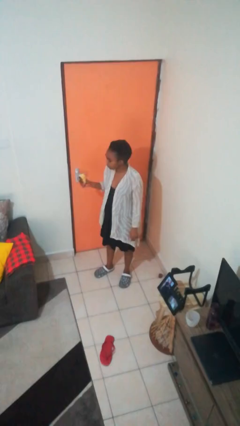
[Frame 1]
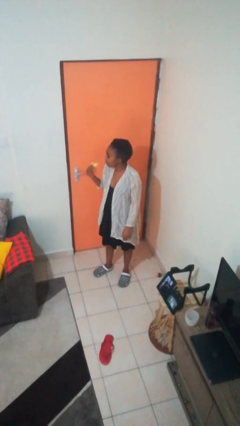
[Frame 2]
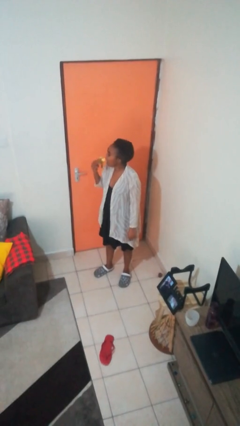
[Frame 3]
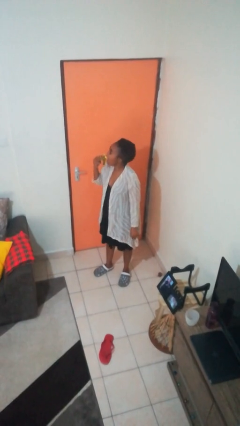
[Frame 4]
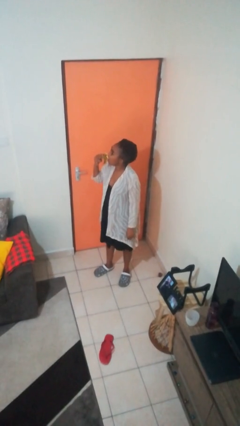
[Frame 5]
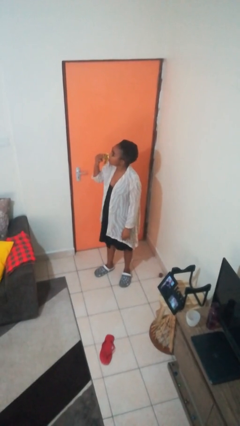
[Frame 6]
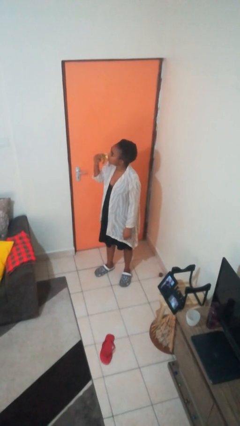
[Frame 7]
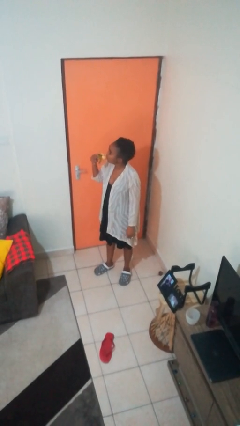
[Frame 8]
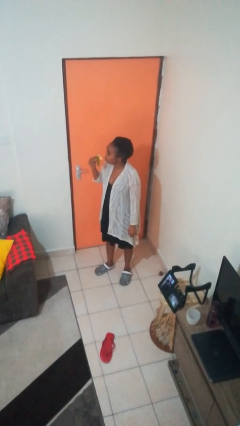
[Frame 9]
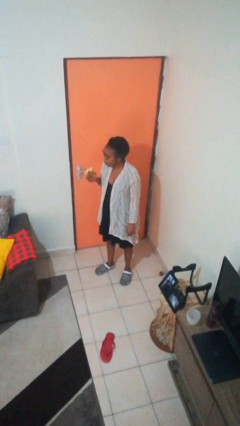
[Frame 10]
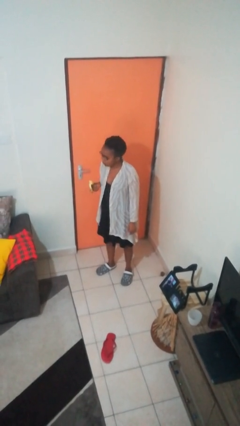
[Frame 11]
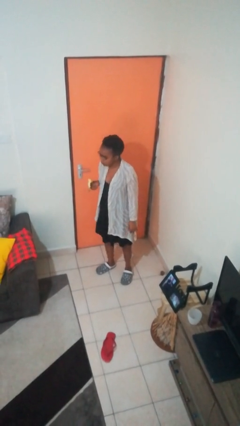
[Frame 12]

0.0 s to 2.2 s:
person eats banana

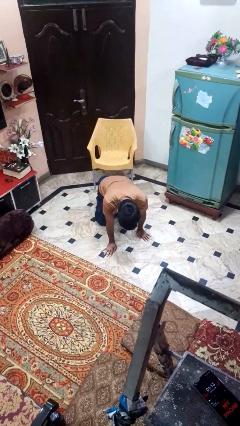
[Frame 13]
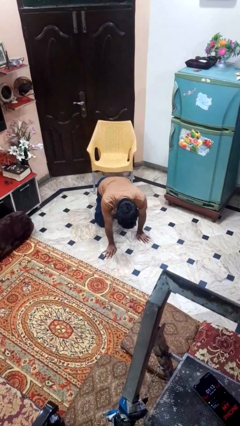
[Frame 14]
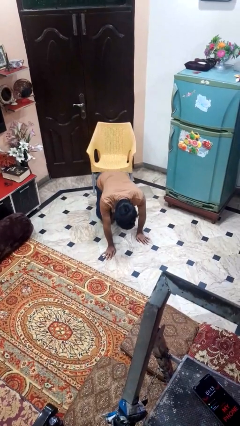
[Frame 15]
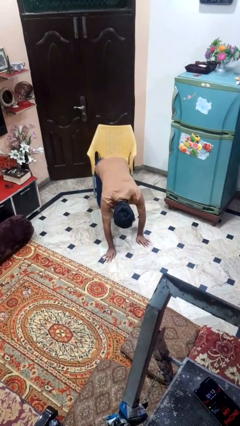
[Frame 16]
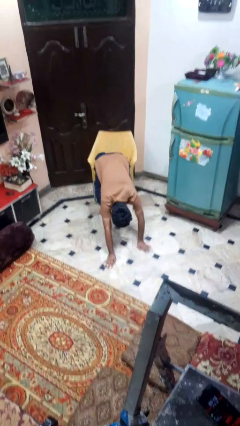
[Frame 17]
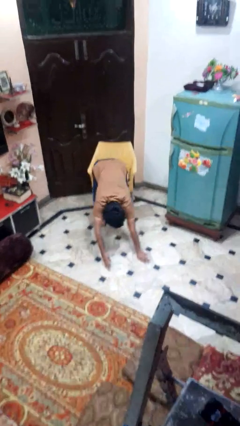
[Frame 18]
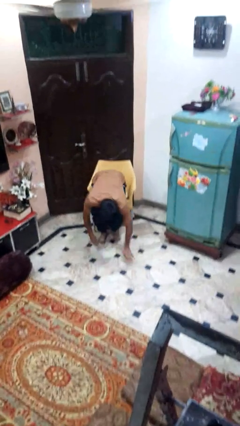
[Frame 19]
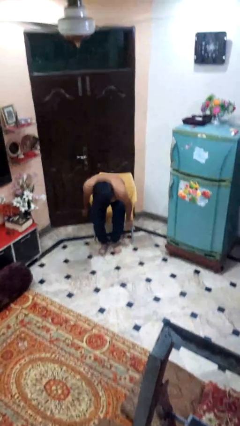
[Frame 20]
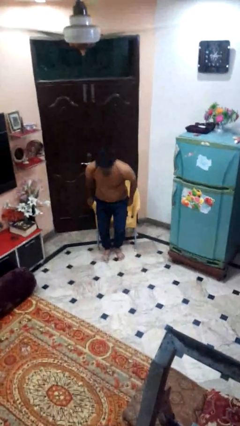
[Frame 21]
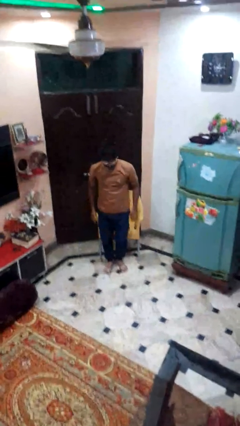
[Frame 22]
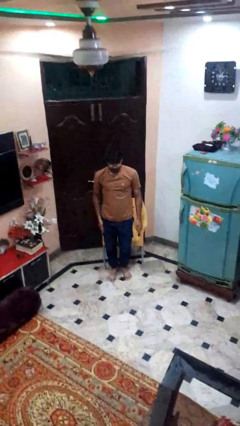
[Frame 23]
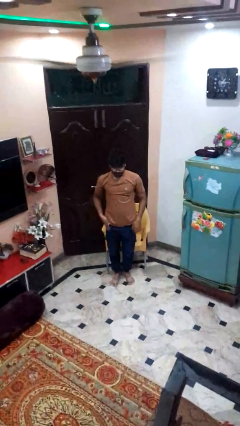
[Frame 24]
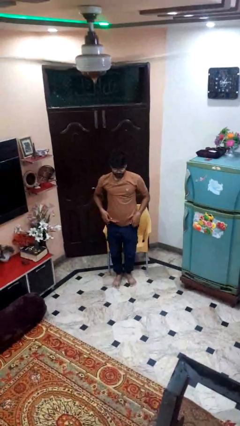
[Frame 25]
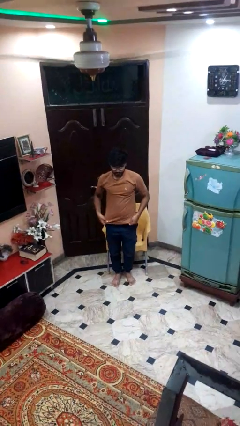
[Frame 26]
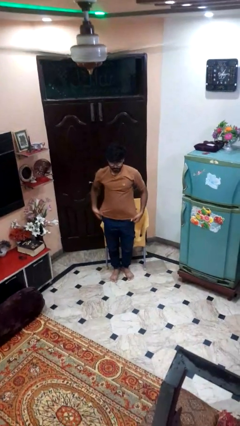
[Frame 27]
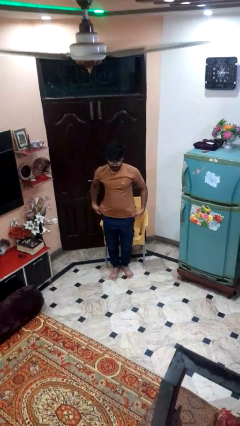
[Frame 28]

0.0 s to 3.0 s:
person stands up from floor

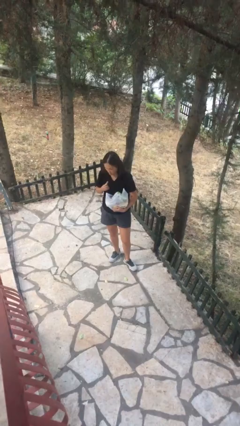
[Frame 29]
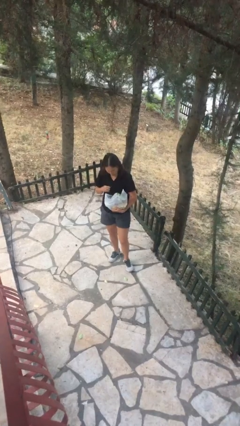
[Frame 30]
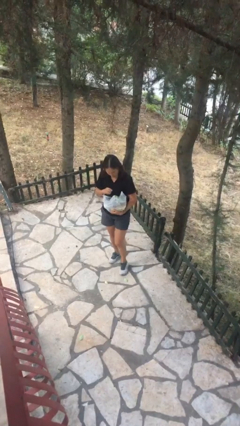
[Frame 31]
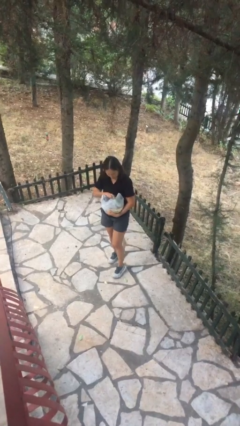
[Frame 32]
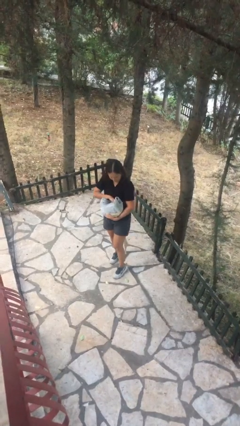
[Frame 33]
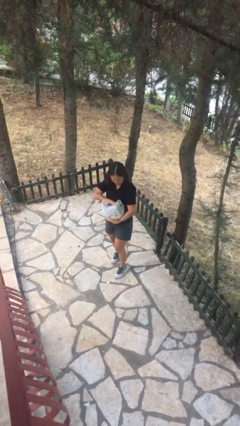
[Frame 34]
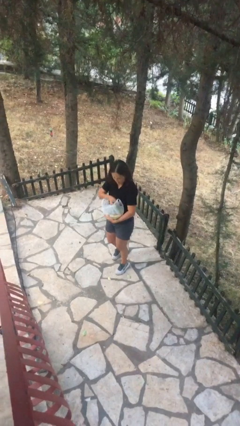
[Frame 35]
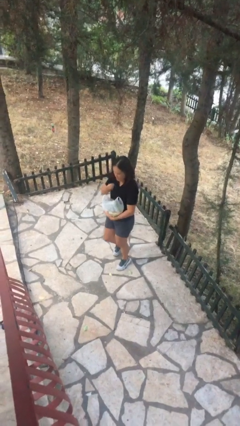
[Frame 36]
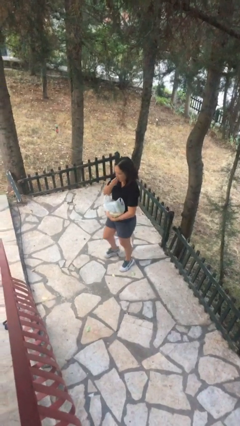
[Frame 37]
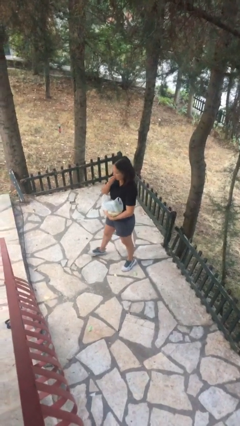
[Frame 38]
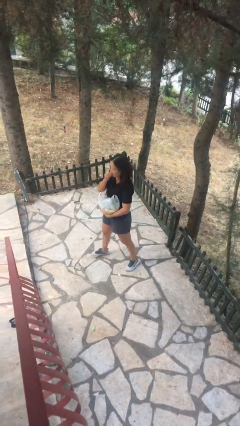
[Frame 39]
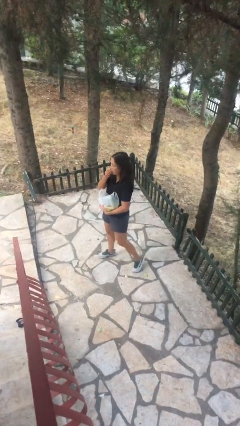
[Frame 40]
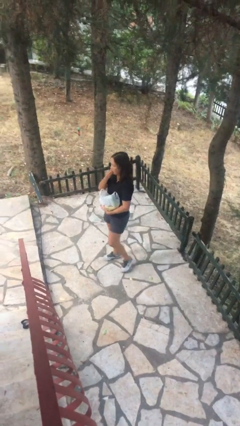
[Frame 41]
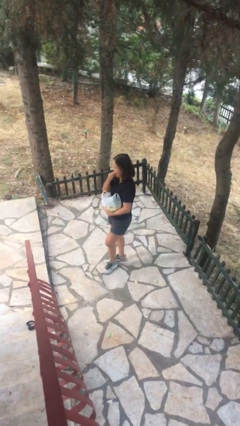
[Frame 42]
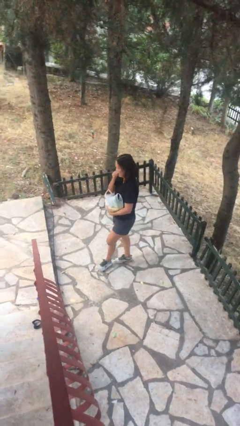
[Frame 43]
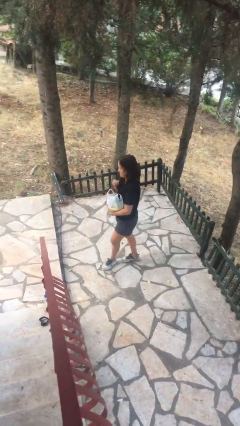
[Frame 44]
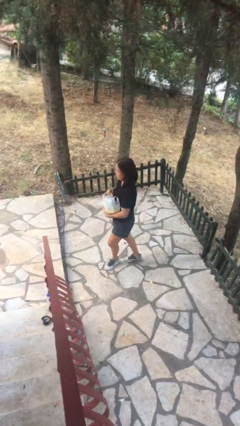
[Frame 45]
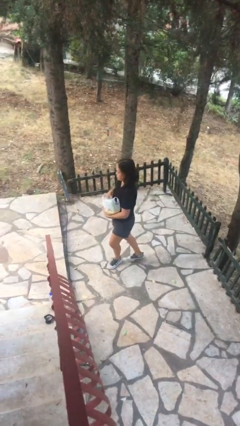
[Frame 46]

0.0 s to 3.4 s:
person eats snack from bag

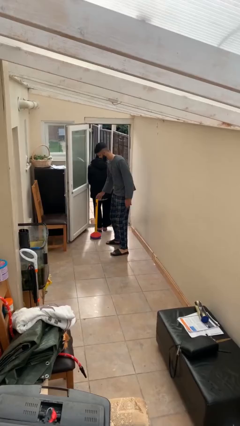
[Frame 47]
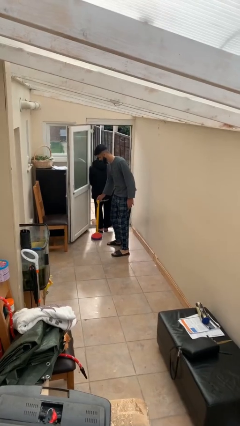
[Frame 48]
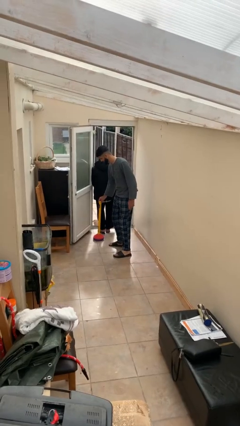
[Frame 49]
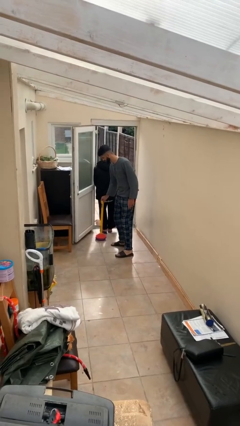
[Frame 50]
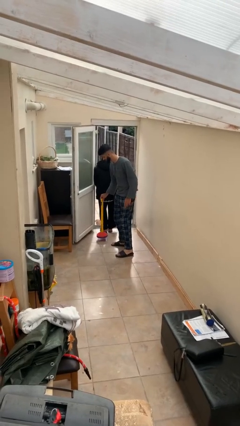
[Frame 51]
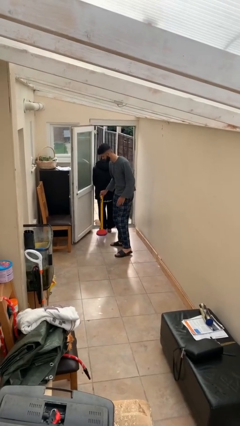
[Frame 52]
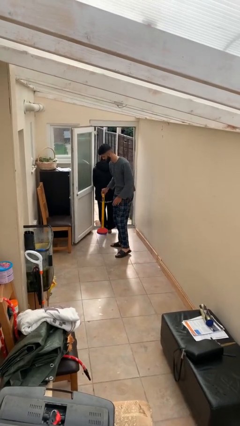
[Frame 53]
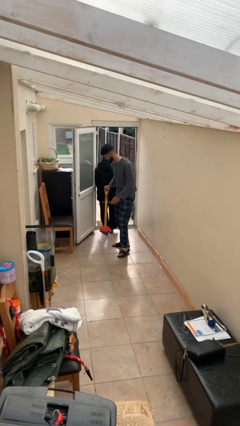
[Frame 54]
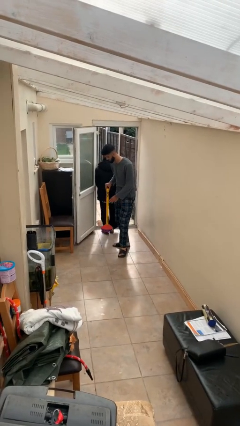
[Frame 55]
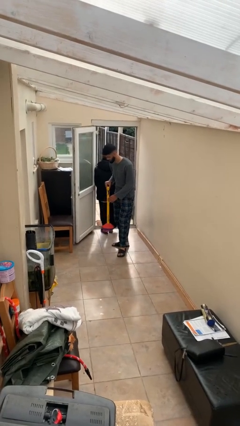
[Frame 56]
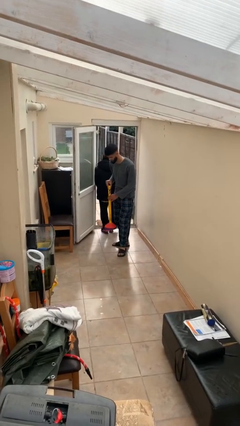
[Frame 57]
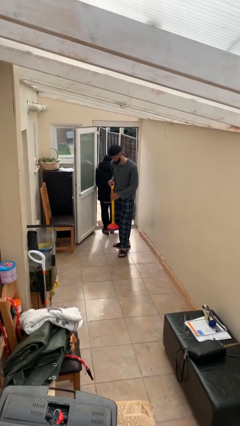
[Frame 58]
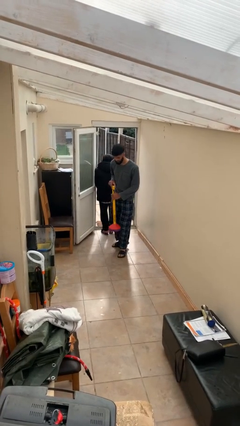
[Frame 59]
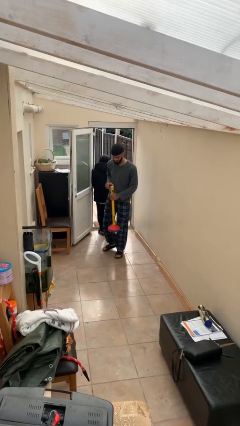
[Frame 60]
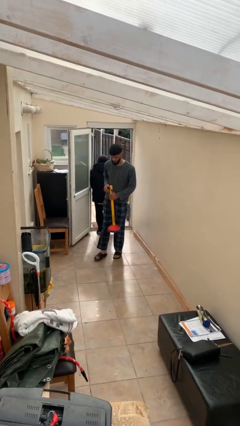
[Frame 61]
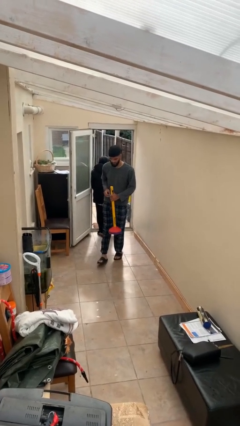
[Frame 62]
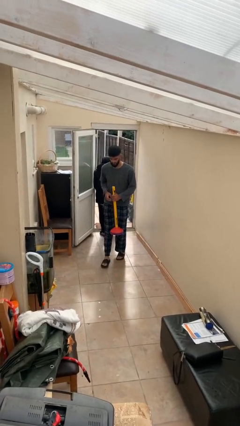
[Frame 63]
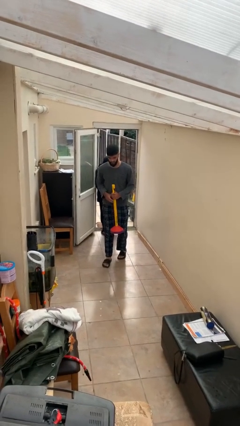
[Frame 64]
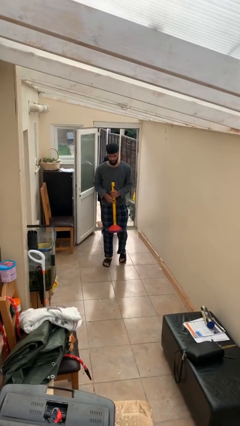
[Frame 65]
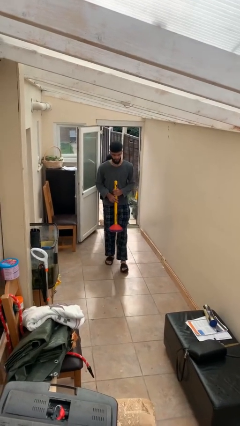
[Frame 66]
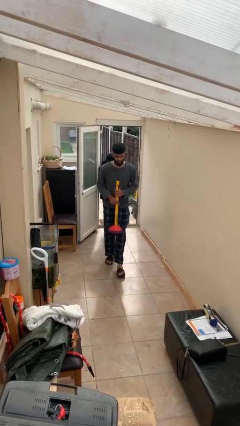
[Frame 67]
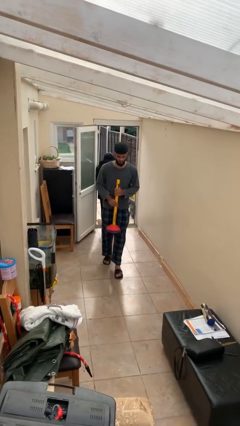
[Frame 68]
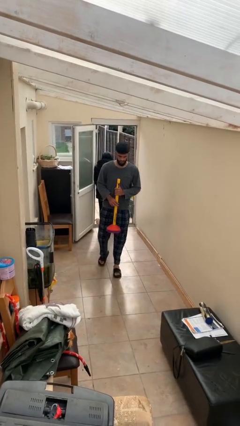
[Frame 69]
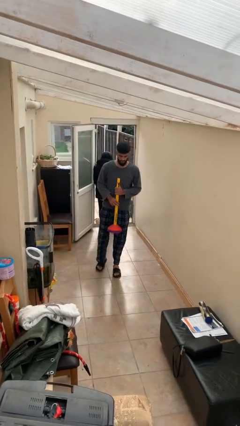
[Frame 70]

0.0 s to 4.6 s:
person steals object from person

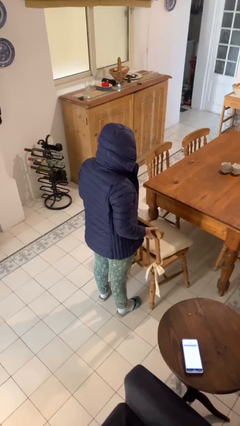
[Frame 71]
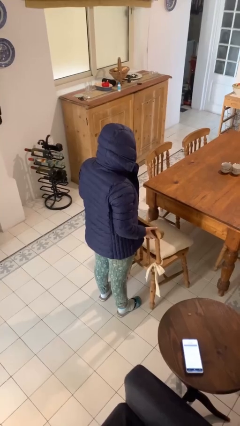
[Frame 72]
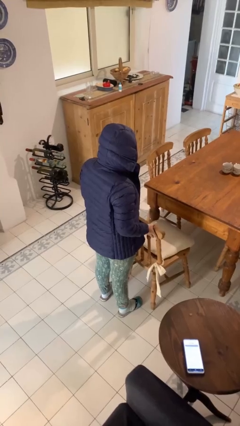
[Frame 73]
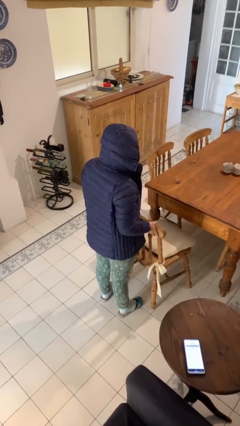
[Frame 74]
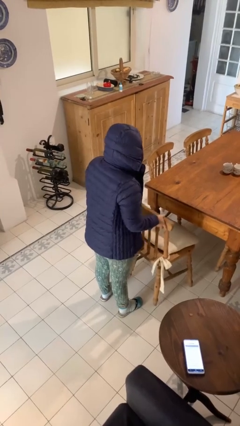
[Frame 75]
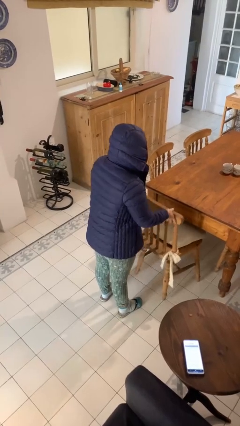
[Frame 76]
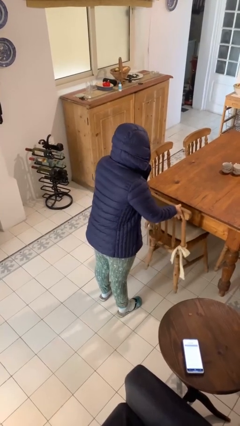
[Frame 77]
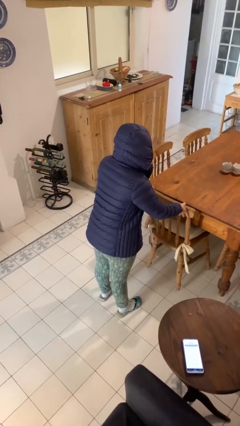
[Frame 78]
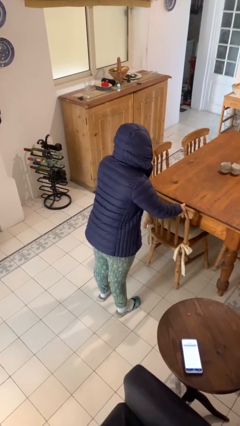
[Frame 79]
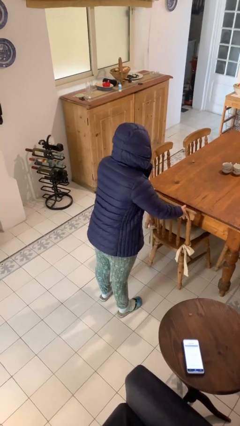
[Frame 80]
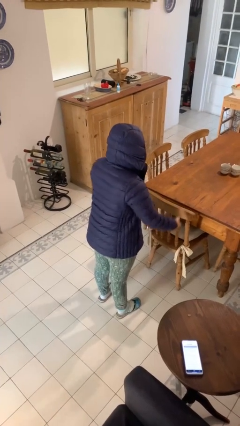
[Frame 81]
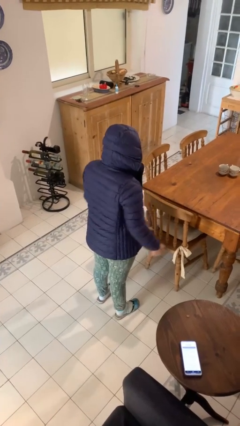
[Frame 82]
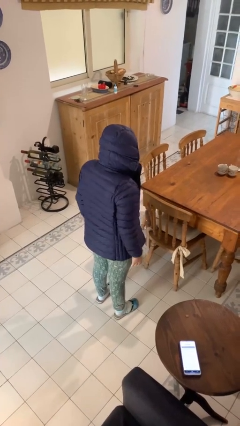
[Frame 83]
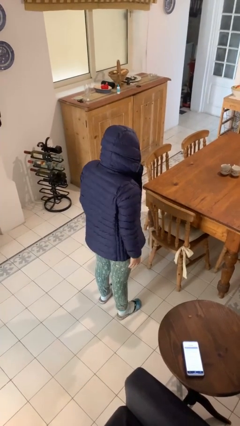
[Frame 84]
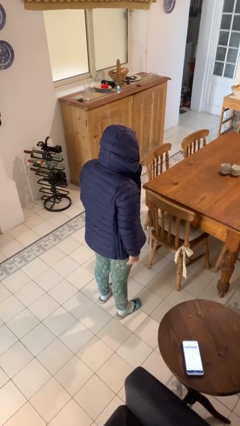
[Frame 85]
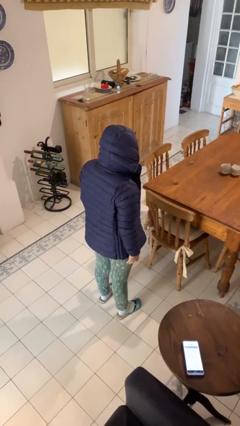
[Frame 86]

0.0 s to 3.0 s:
person pushes in chair

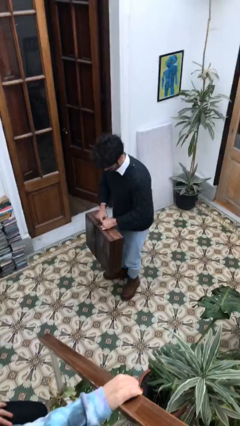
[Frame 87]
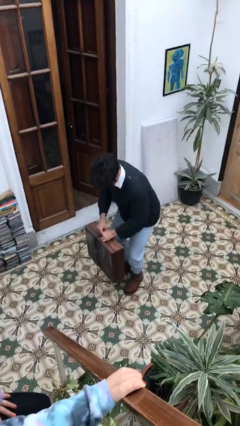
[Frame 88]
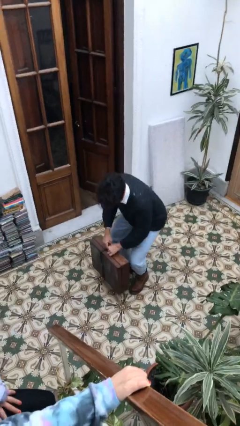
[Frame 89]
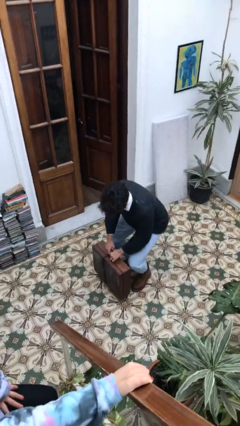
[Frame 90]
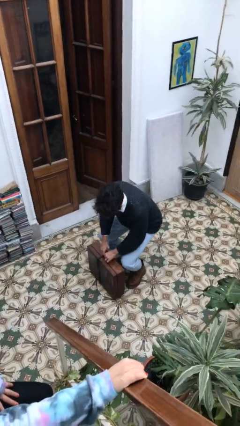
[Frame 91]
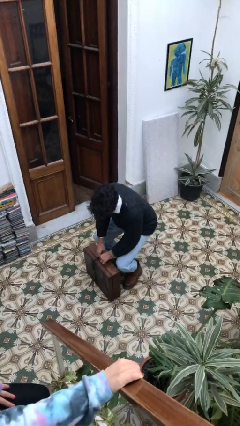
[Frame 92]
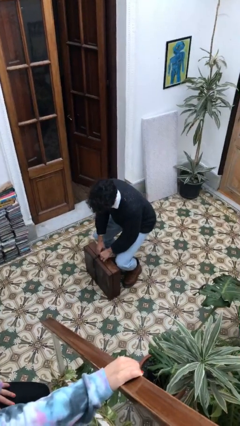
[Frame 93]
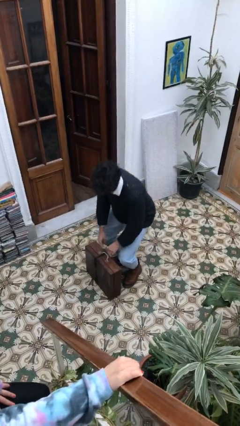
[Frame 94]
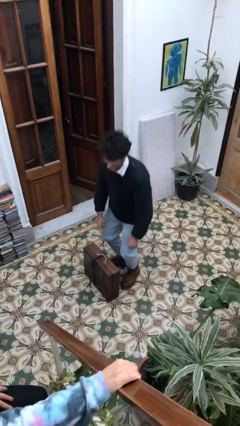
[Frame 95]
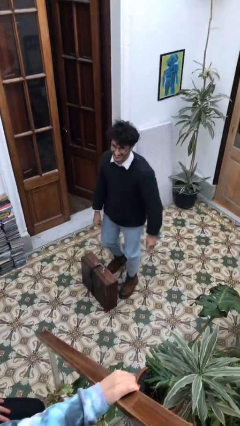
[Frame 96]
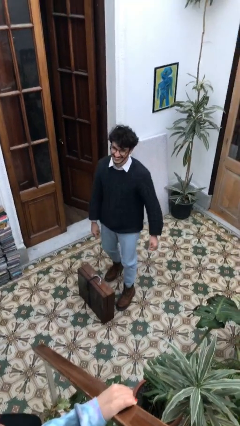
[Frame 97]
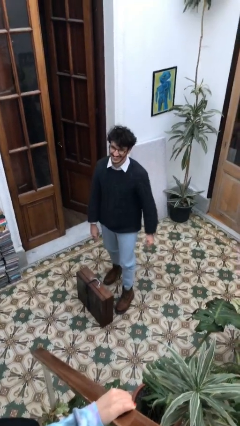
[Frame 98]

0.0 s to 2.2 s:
person puts down object on floor
